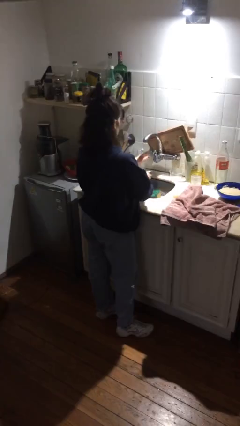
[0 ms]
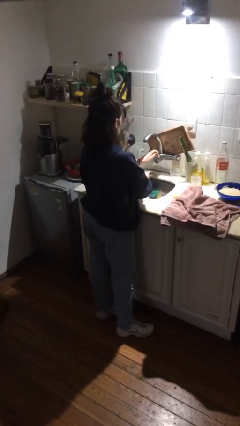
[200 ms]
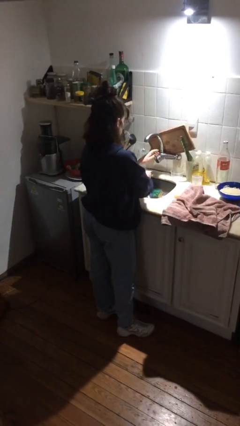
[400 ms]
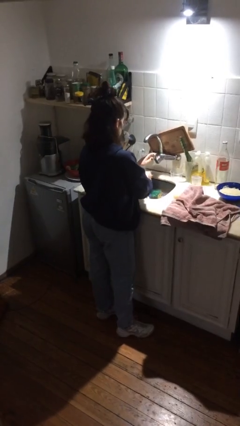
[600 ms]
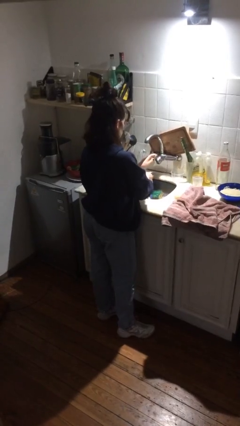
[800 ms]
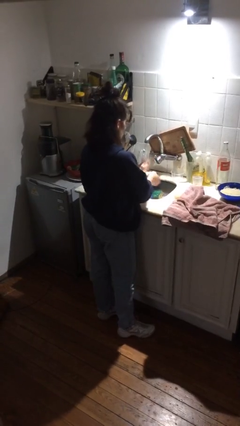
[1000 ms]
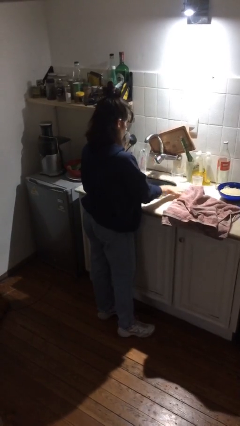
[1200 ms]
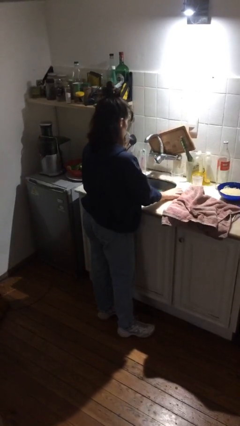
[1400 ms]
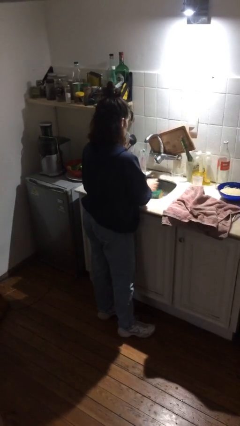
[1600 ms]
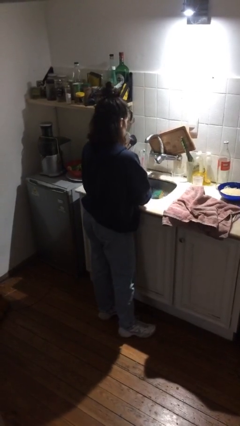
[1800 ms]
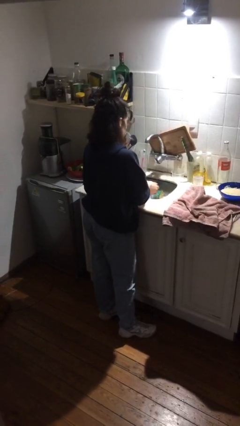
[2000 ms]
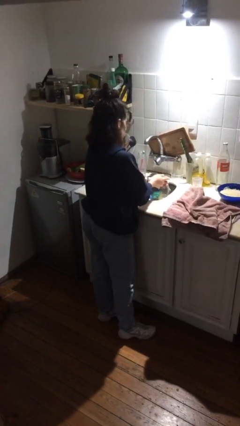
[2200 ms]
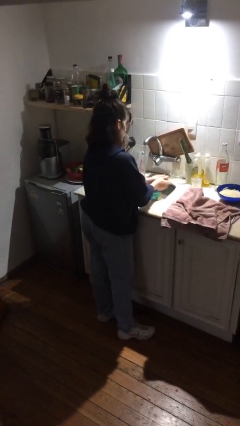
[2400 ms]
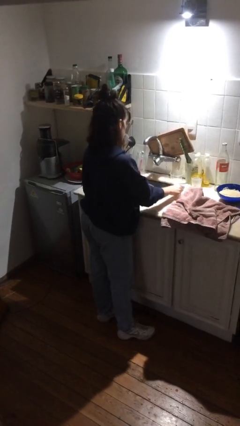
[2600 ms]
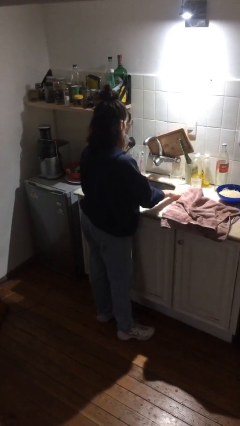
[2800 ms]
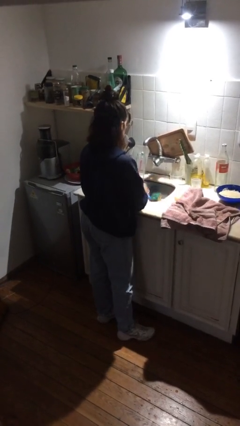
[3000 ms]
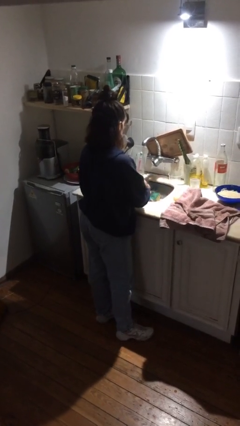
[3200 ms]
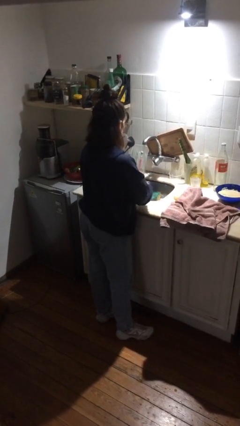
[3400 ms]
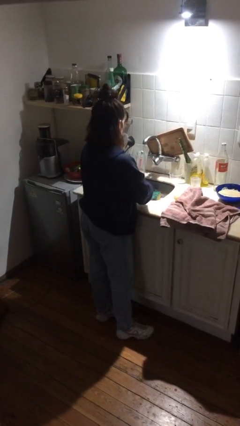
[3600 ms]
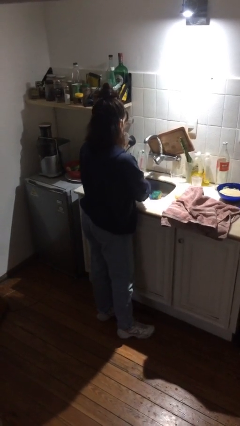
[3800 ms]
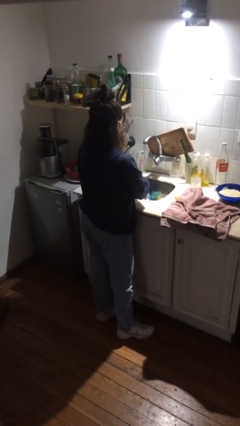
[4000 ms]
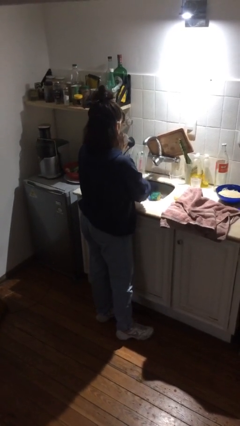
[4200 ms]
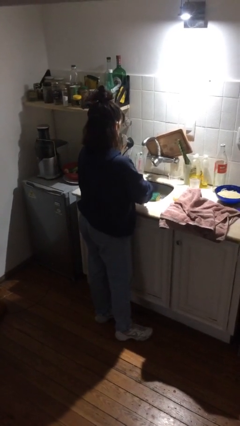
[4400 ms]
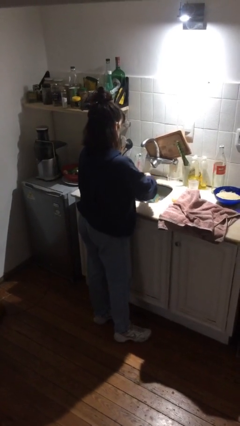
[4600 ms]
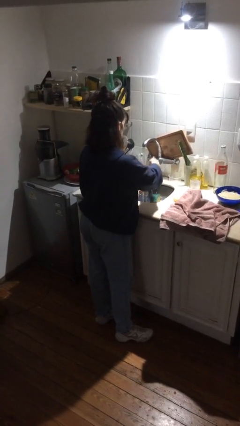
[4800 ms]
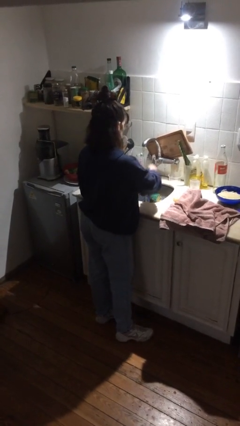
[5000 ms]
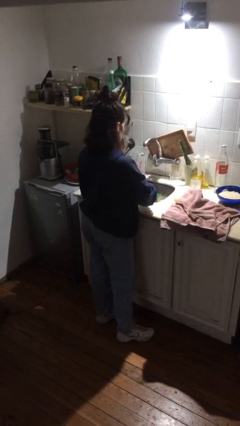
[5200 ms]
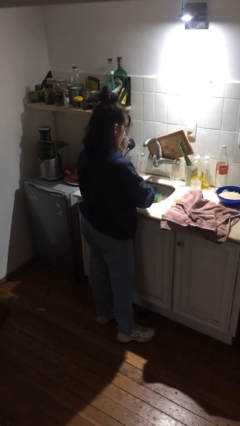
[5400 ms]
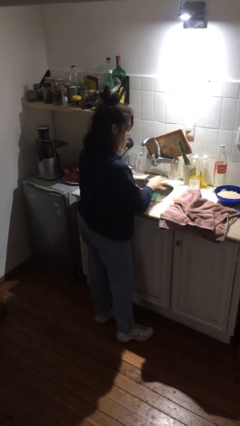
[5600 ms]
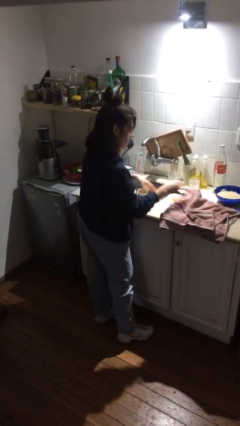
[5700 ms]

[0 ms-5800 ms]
person washes hands

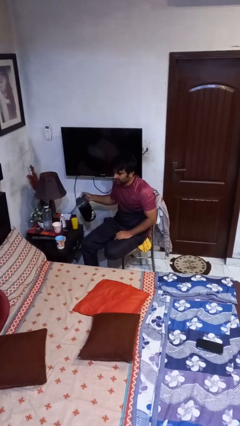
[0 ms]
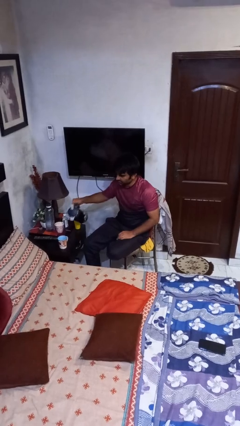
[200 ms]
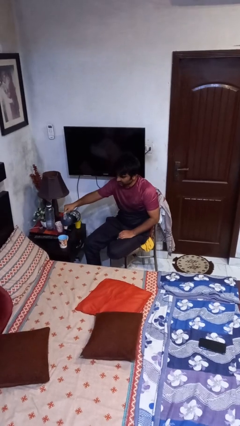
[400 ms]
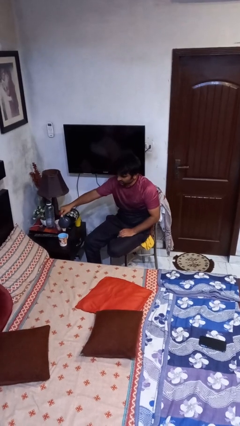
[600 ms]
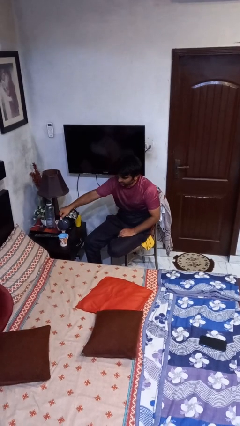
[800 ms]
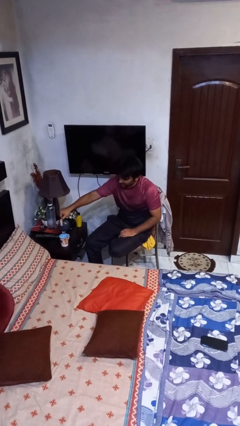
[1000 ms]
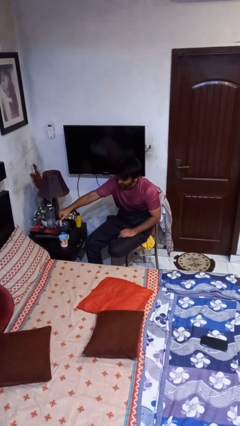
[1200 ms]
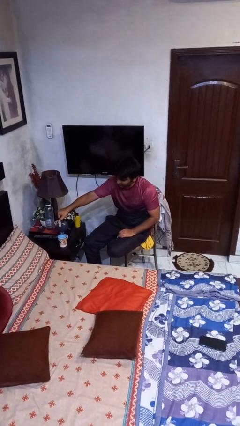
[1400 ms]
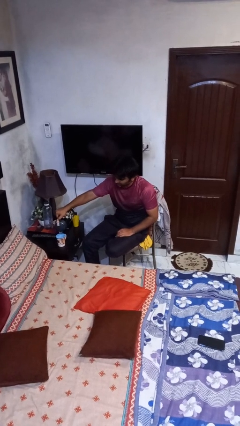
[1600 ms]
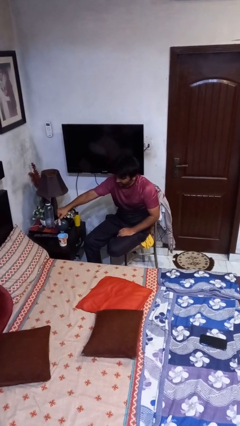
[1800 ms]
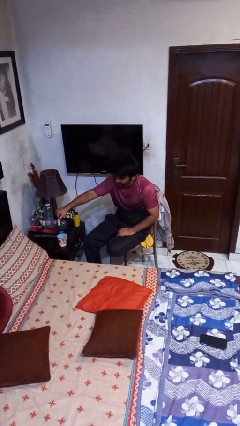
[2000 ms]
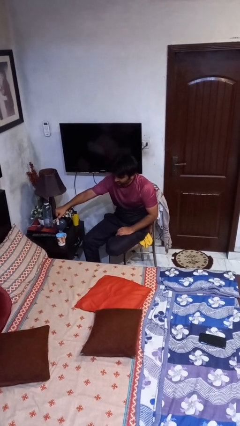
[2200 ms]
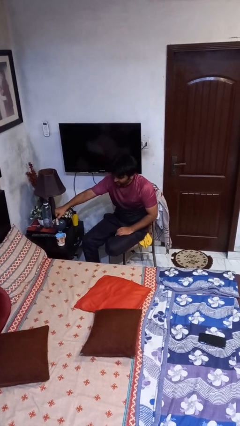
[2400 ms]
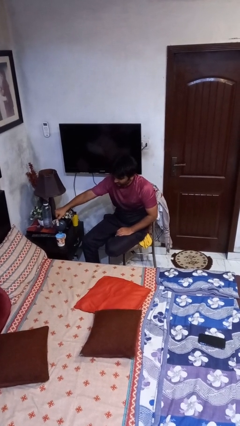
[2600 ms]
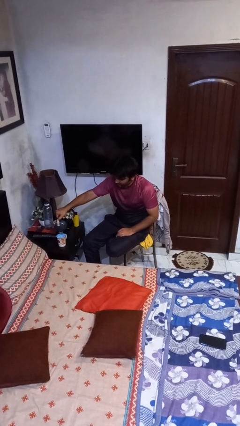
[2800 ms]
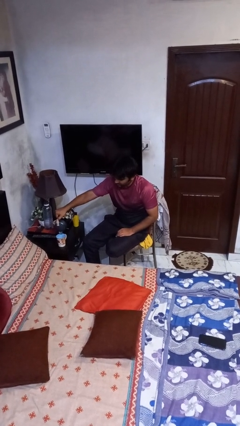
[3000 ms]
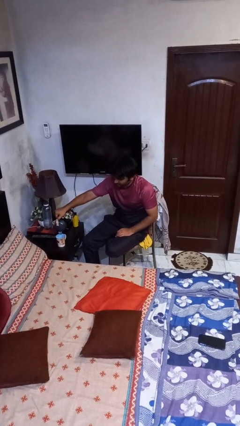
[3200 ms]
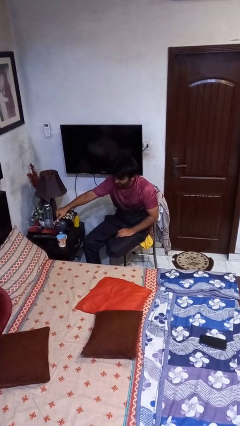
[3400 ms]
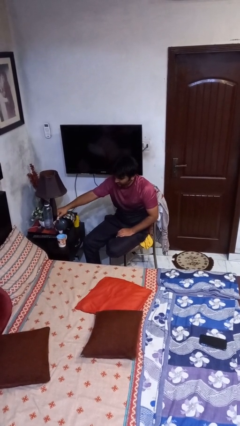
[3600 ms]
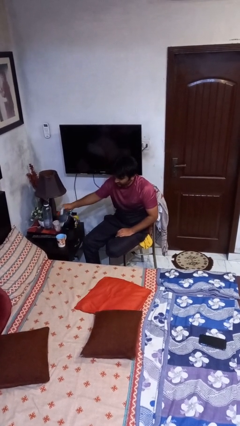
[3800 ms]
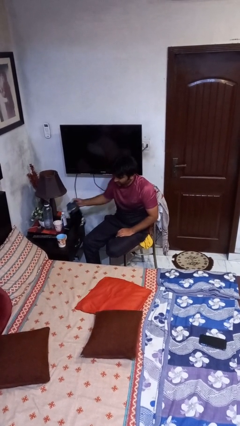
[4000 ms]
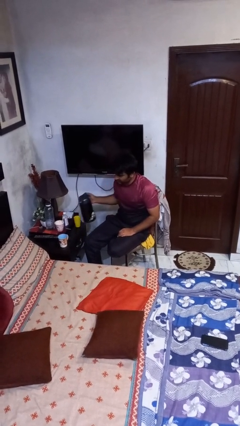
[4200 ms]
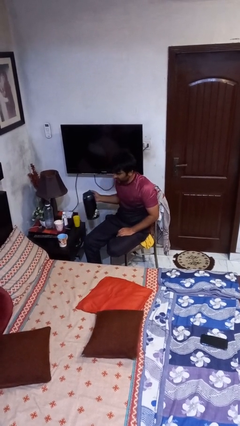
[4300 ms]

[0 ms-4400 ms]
person pours coffee into mug

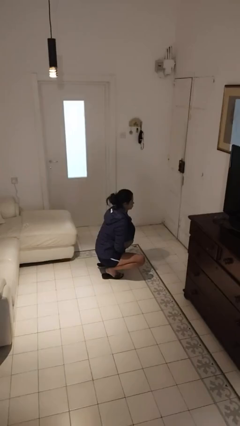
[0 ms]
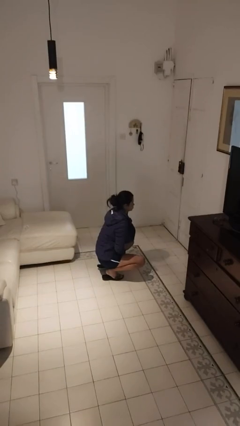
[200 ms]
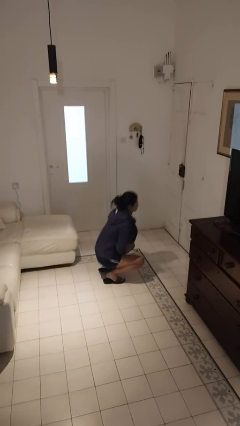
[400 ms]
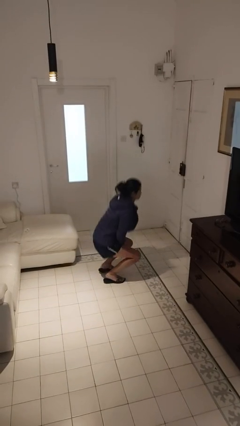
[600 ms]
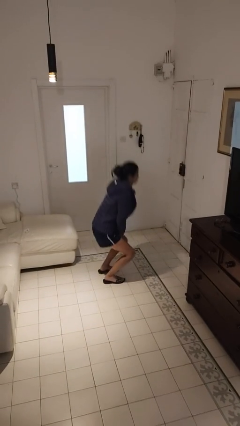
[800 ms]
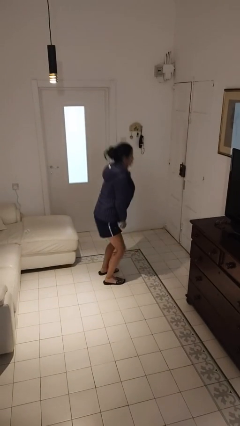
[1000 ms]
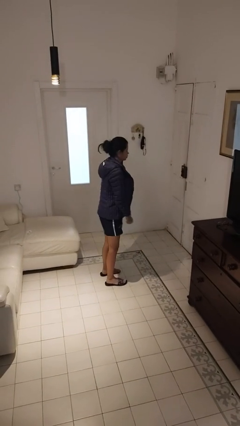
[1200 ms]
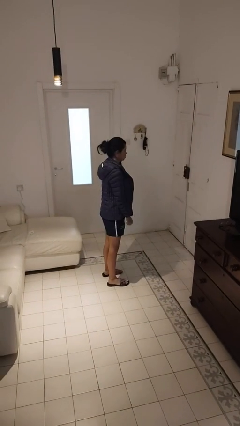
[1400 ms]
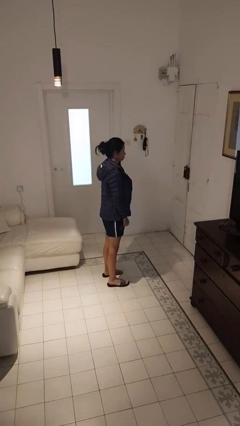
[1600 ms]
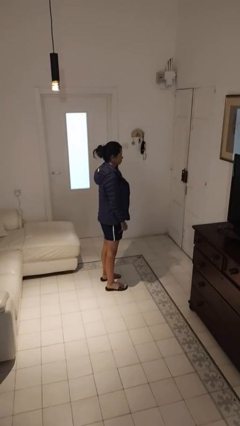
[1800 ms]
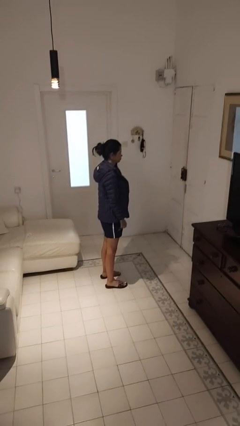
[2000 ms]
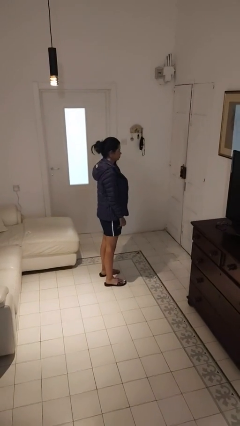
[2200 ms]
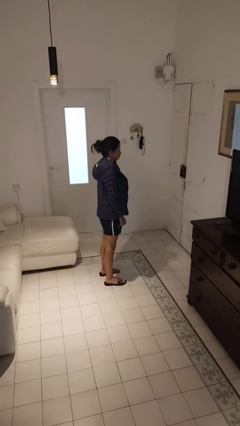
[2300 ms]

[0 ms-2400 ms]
person stands up

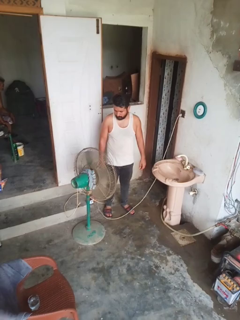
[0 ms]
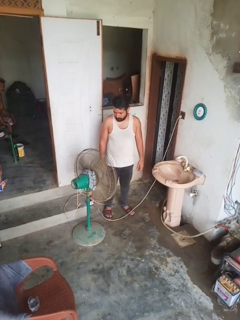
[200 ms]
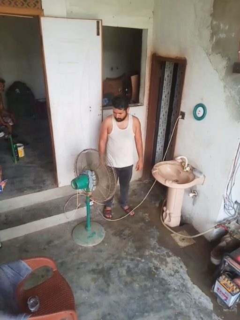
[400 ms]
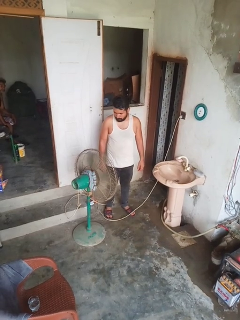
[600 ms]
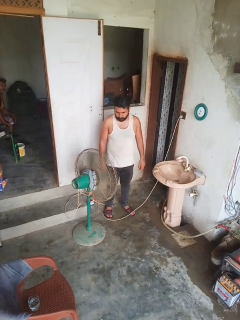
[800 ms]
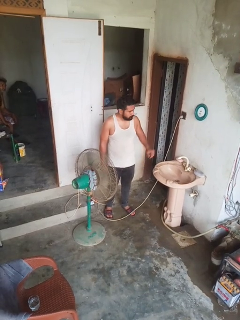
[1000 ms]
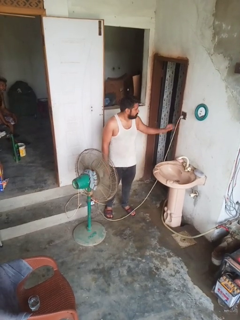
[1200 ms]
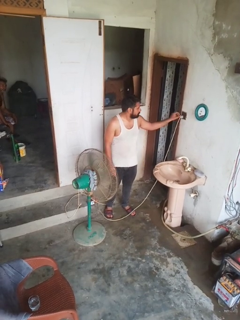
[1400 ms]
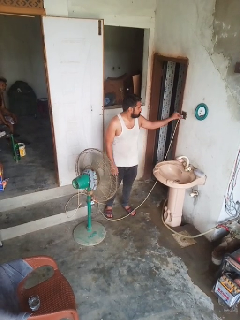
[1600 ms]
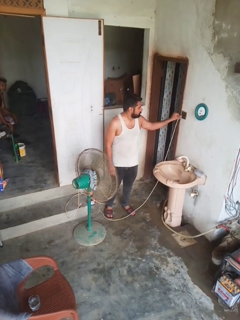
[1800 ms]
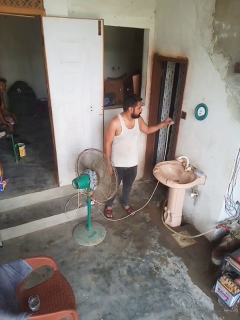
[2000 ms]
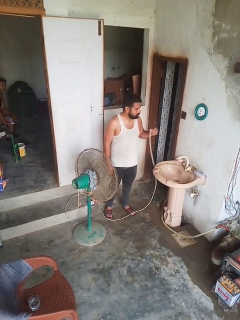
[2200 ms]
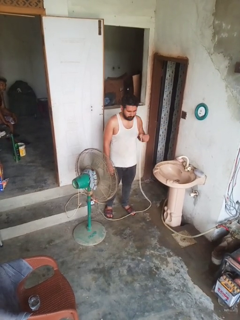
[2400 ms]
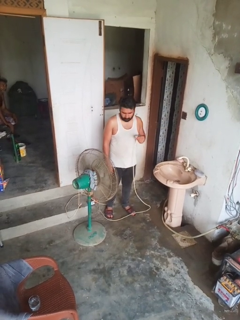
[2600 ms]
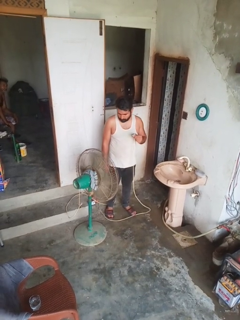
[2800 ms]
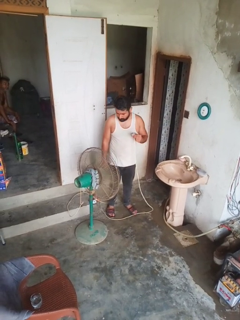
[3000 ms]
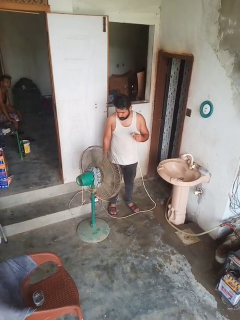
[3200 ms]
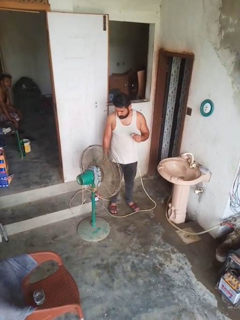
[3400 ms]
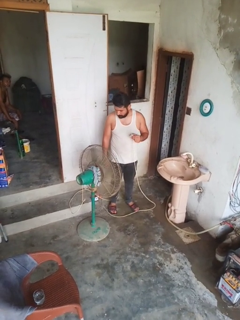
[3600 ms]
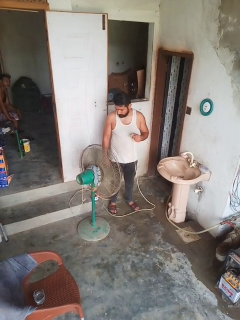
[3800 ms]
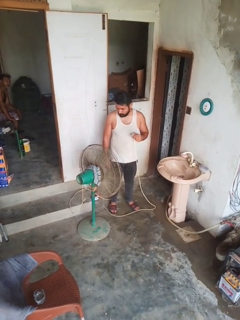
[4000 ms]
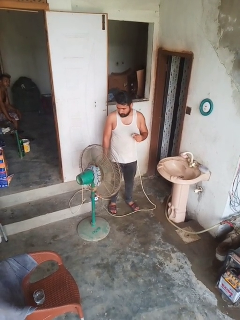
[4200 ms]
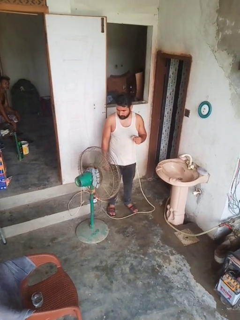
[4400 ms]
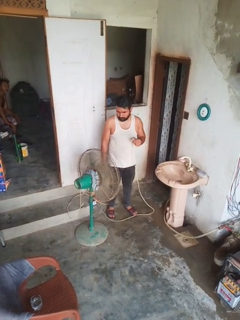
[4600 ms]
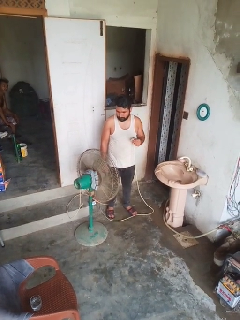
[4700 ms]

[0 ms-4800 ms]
person turns off fan

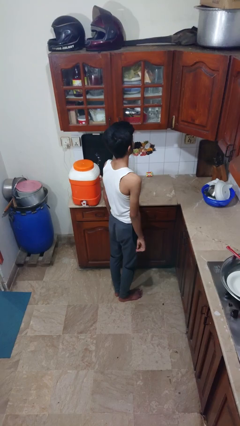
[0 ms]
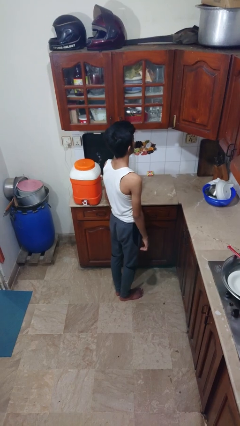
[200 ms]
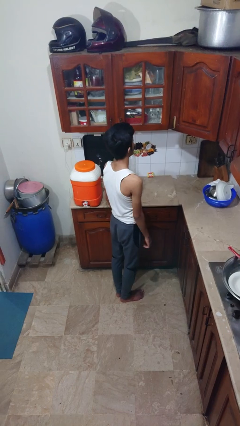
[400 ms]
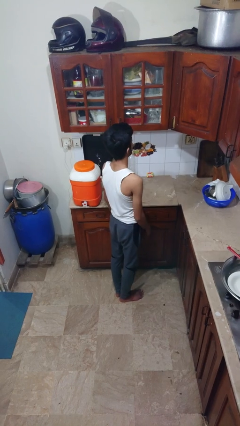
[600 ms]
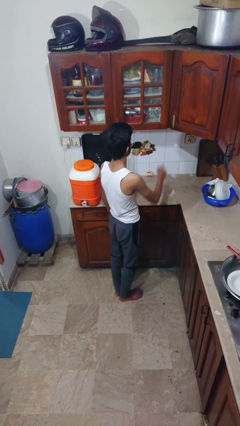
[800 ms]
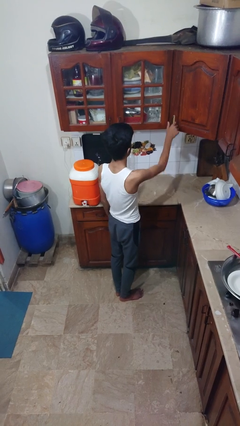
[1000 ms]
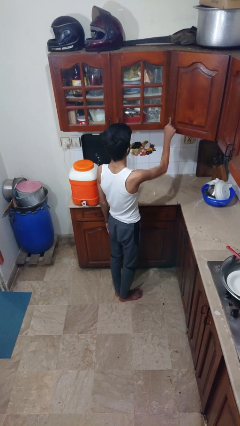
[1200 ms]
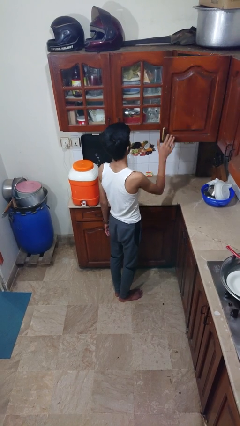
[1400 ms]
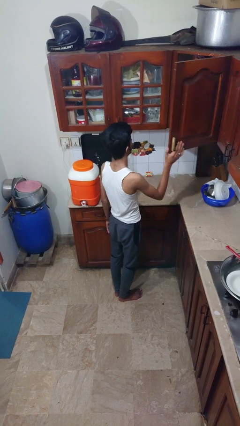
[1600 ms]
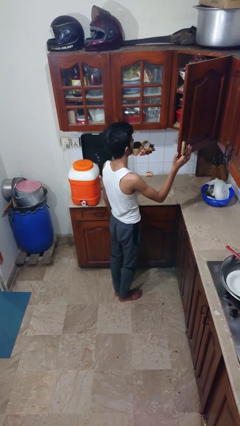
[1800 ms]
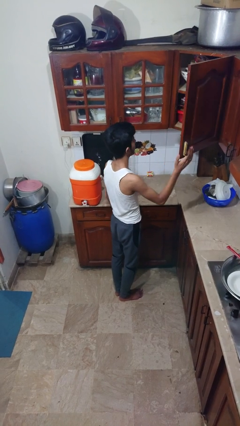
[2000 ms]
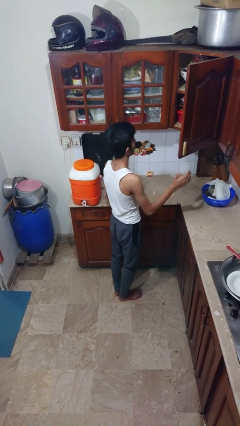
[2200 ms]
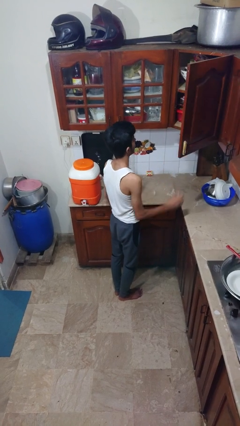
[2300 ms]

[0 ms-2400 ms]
person closes cabinet
